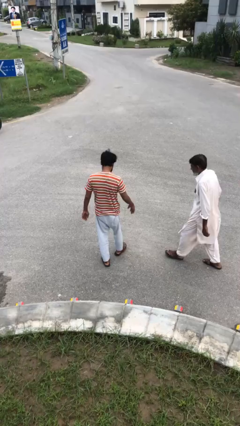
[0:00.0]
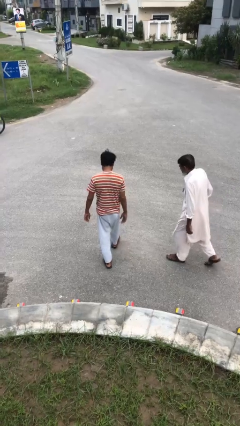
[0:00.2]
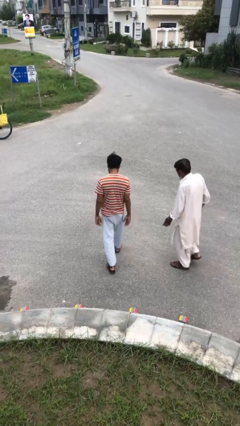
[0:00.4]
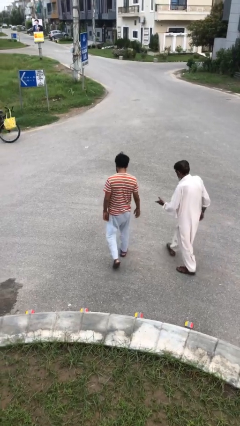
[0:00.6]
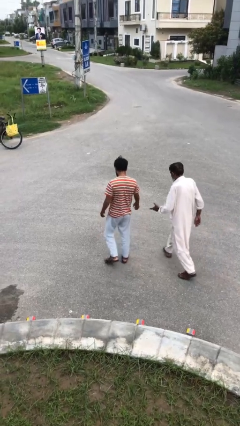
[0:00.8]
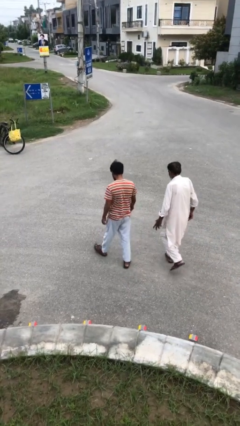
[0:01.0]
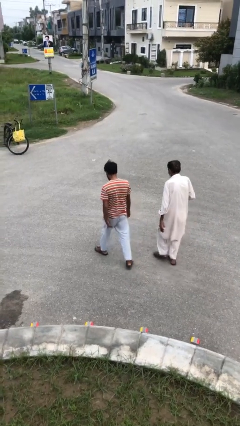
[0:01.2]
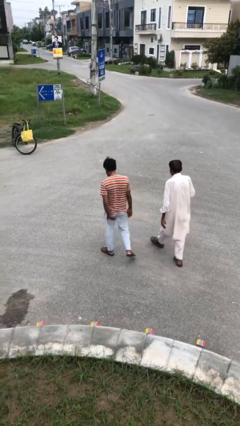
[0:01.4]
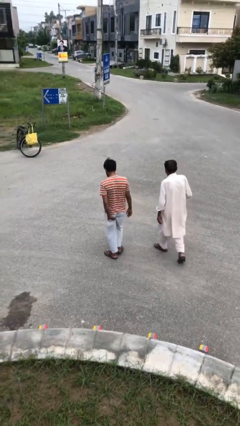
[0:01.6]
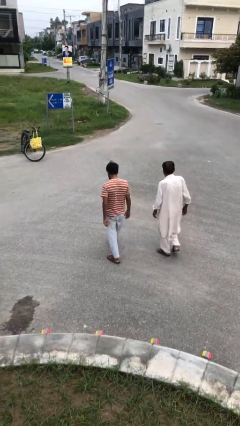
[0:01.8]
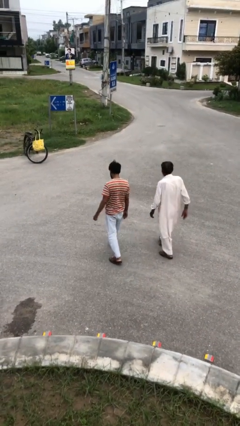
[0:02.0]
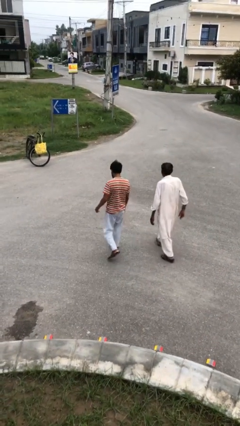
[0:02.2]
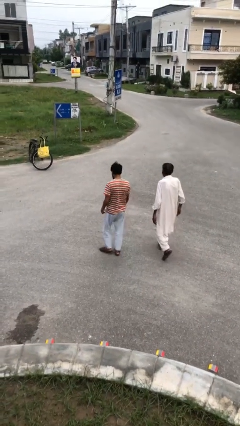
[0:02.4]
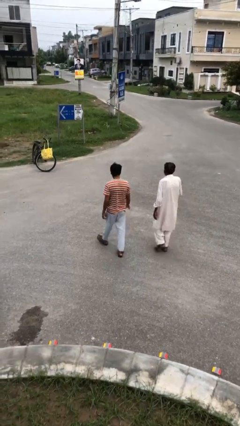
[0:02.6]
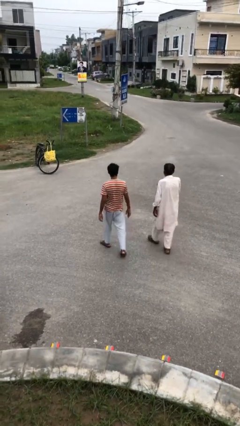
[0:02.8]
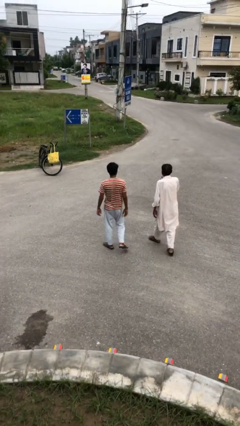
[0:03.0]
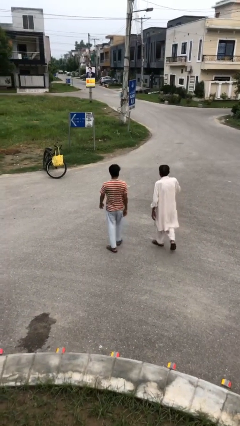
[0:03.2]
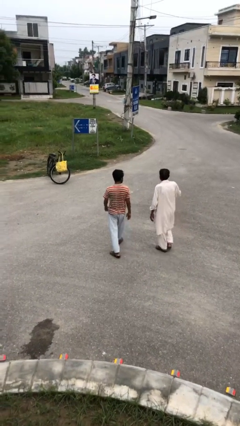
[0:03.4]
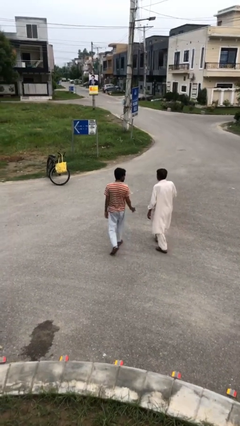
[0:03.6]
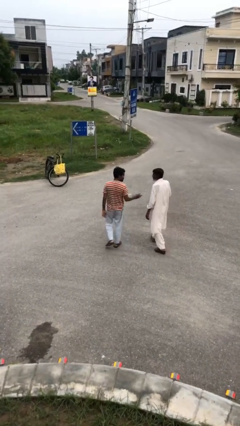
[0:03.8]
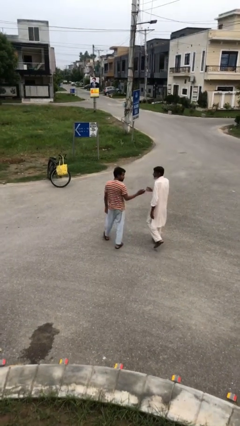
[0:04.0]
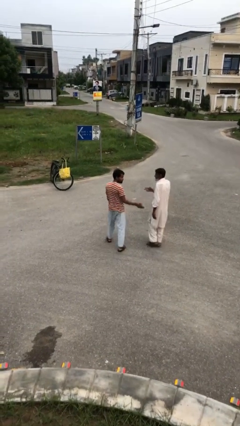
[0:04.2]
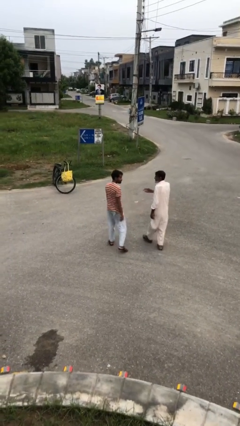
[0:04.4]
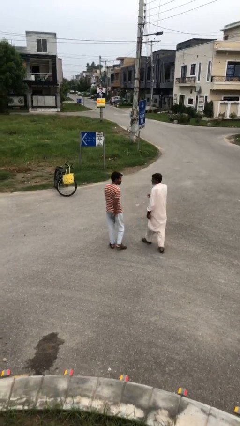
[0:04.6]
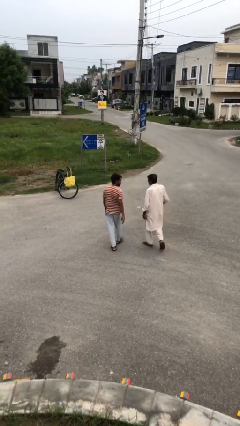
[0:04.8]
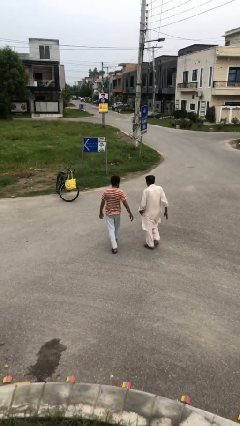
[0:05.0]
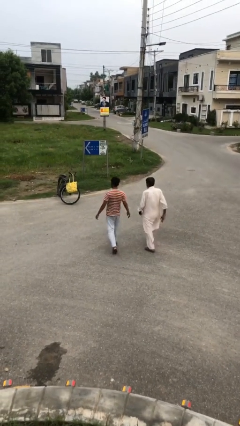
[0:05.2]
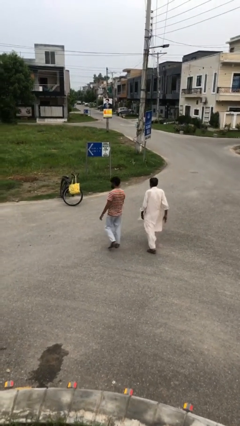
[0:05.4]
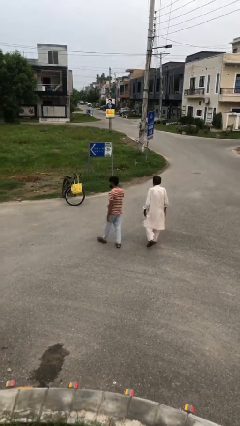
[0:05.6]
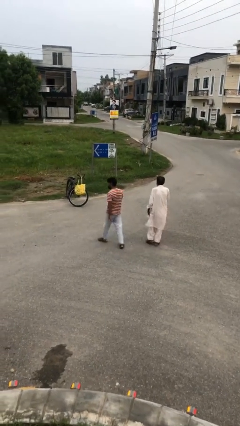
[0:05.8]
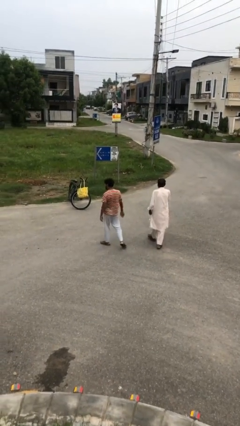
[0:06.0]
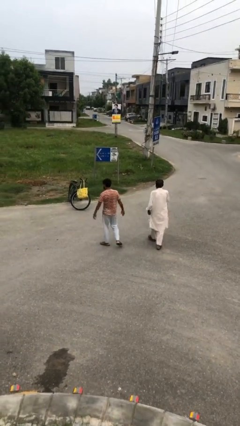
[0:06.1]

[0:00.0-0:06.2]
person talks to person

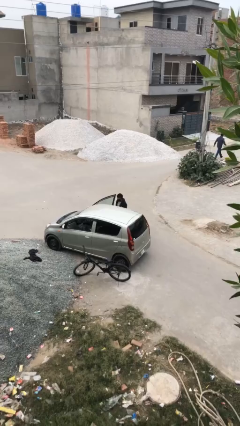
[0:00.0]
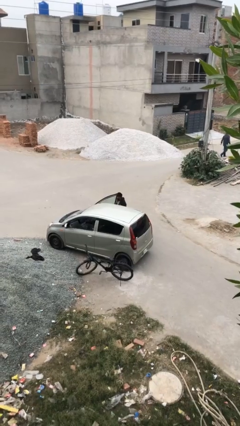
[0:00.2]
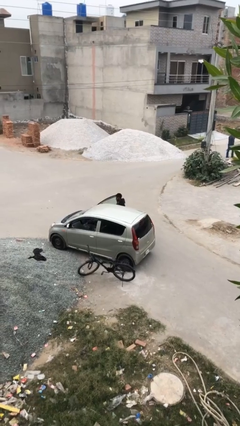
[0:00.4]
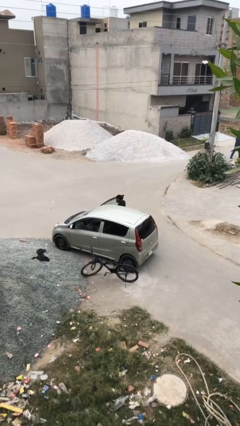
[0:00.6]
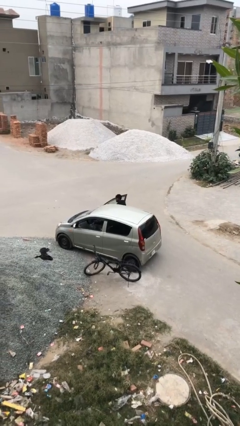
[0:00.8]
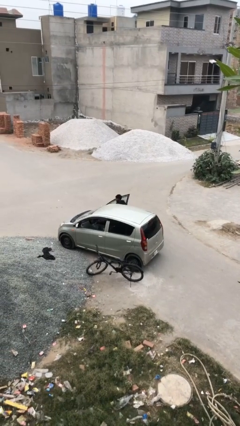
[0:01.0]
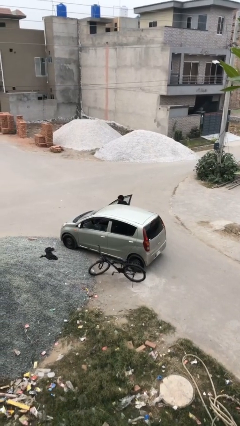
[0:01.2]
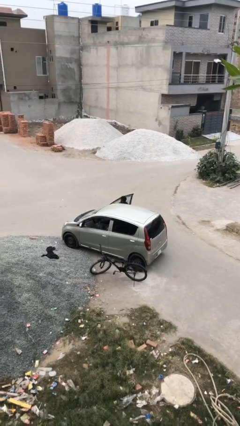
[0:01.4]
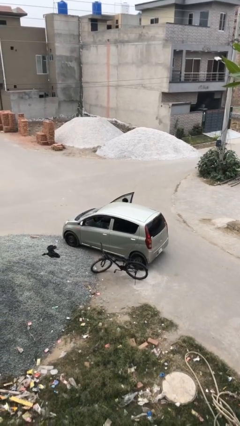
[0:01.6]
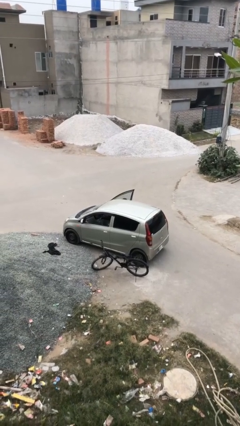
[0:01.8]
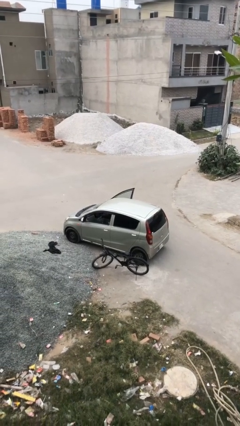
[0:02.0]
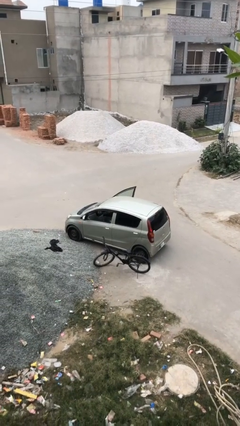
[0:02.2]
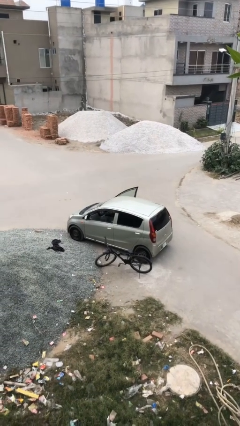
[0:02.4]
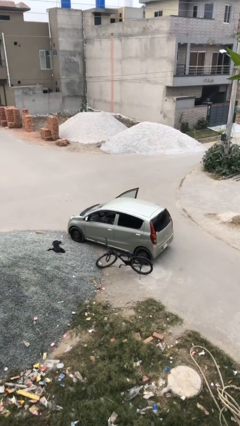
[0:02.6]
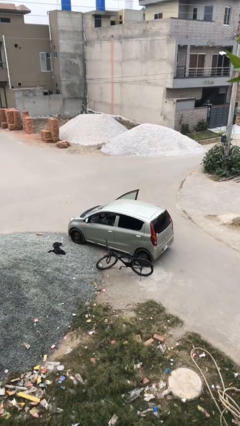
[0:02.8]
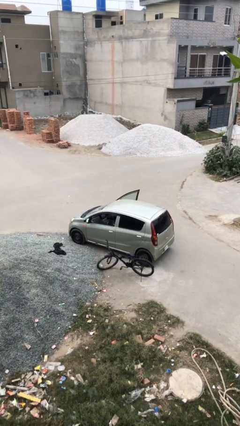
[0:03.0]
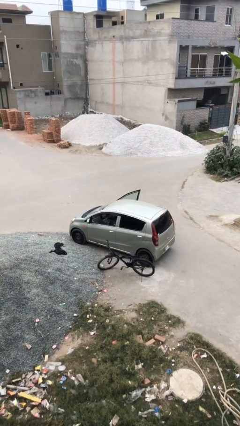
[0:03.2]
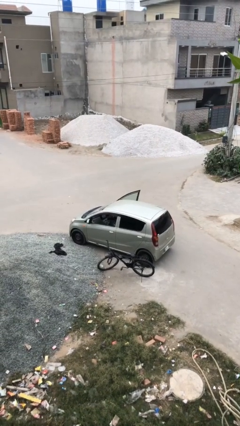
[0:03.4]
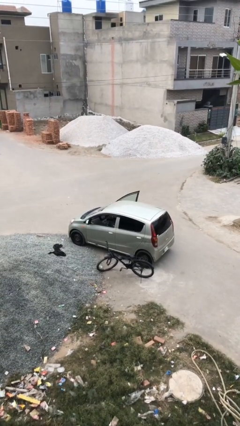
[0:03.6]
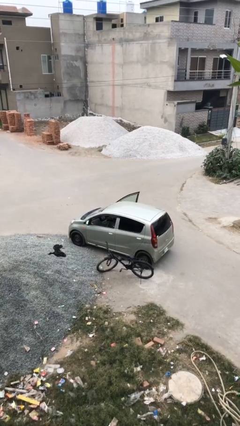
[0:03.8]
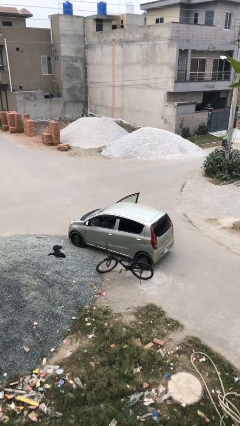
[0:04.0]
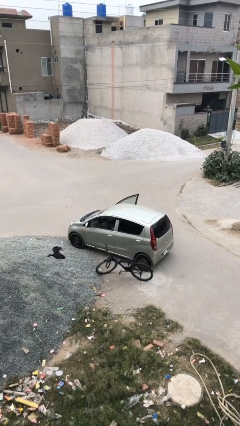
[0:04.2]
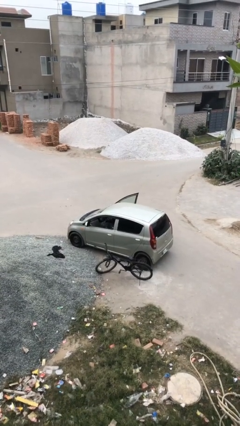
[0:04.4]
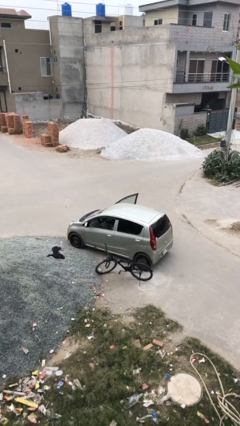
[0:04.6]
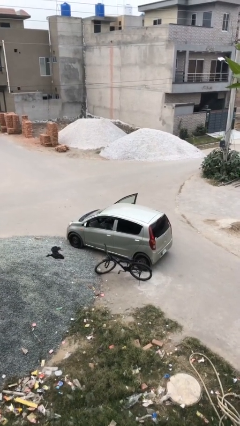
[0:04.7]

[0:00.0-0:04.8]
person enters car

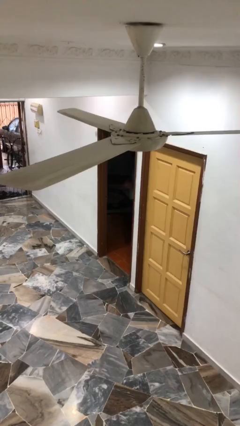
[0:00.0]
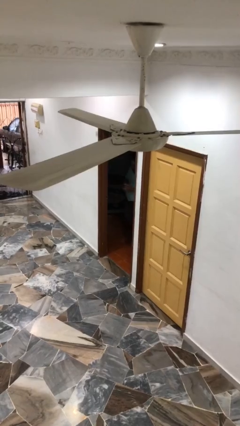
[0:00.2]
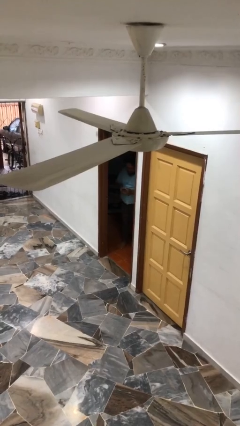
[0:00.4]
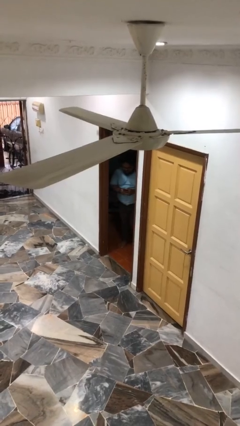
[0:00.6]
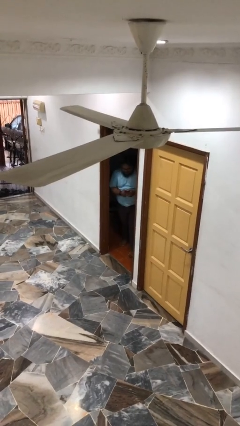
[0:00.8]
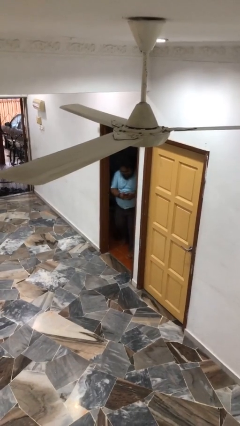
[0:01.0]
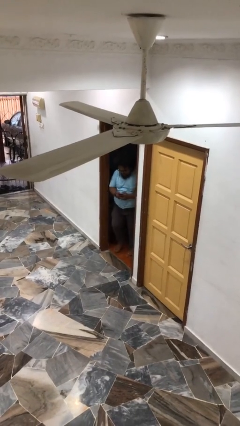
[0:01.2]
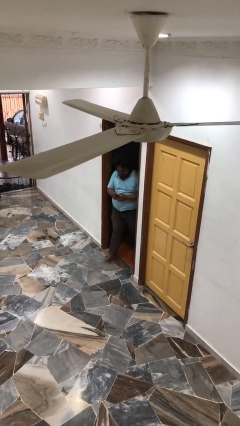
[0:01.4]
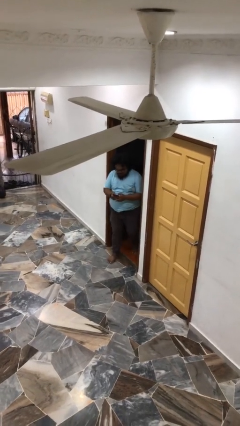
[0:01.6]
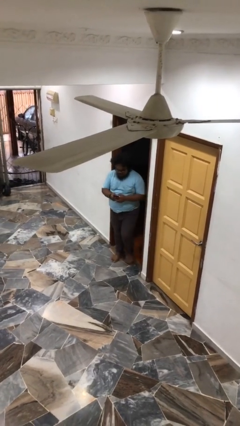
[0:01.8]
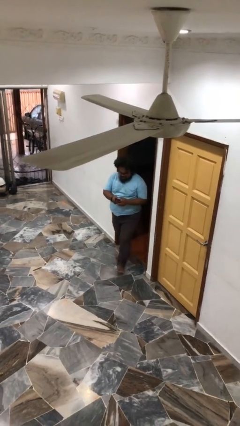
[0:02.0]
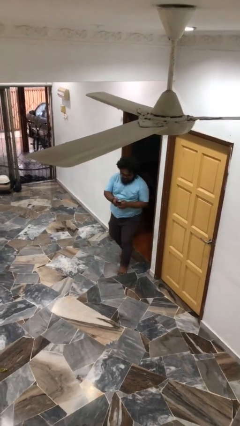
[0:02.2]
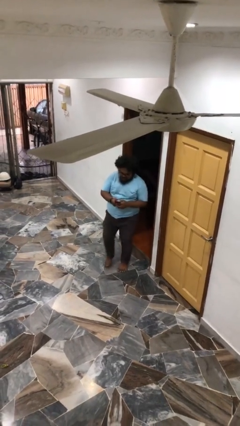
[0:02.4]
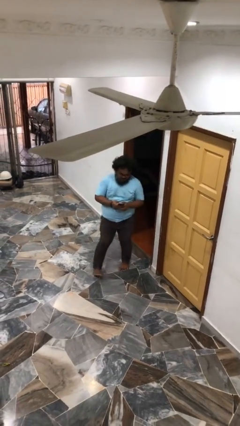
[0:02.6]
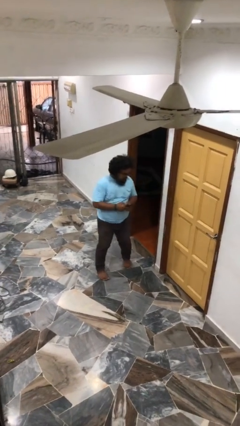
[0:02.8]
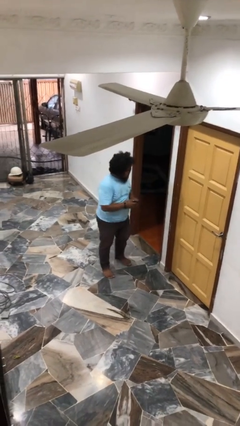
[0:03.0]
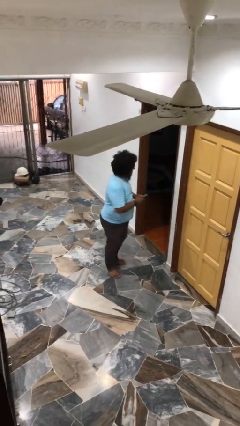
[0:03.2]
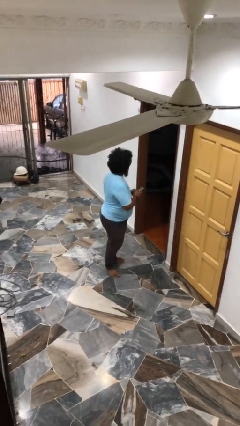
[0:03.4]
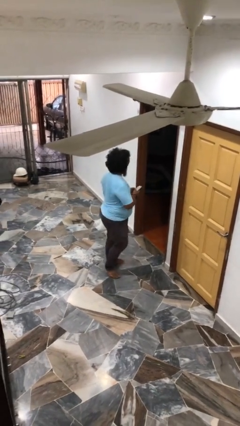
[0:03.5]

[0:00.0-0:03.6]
person enters scene through structure

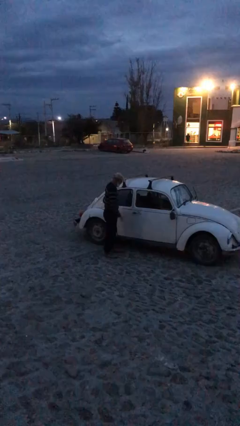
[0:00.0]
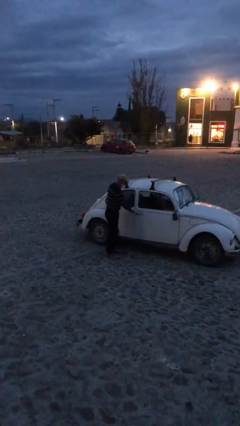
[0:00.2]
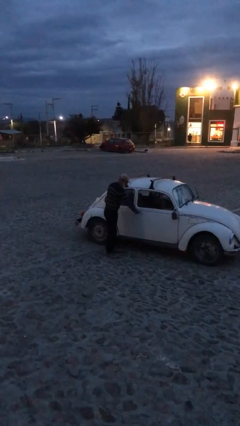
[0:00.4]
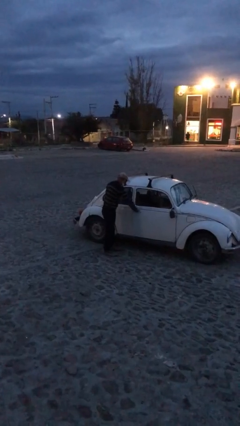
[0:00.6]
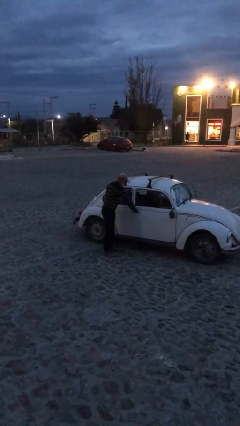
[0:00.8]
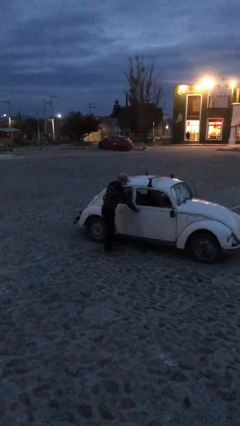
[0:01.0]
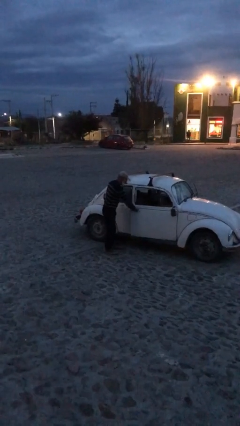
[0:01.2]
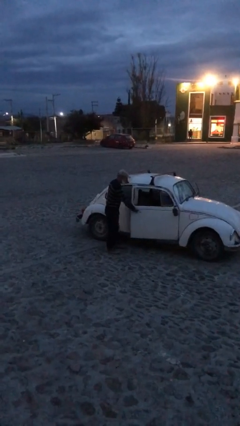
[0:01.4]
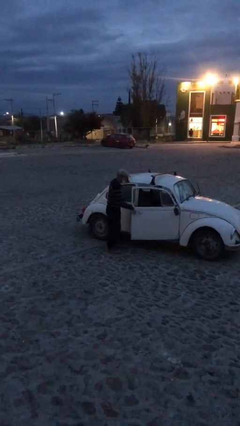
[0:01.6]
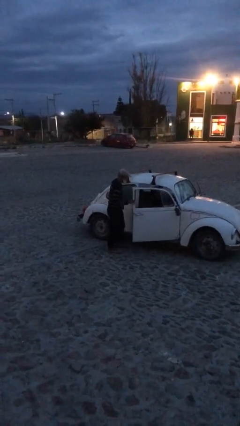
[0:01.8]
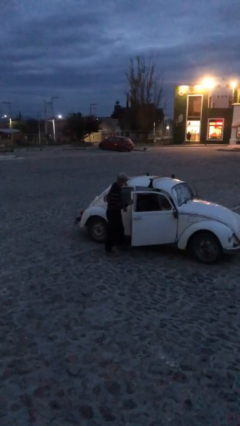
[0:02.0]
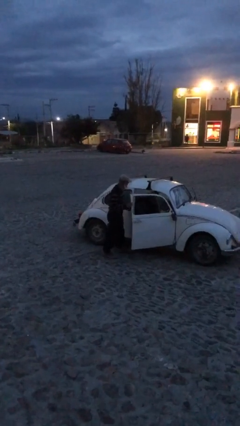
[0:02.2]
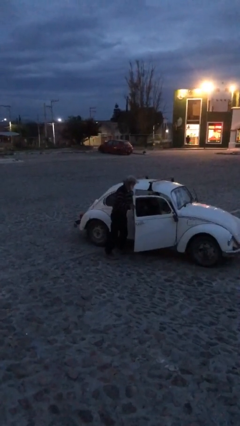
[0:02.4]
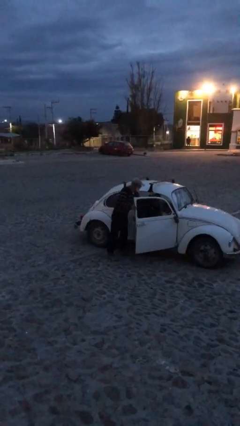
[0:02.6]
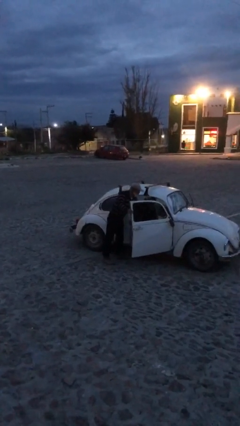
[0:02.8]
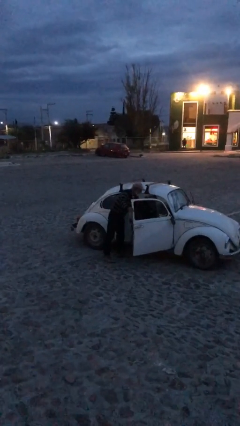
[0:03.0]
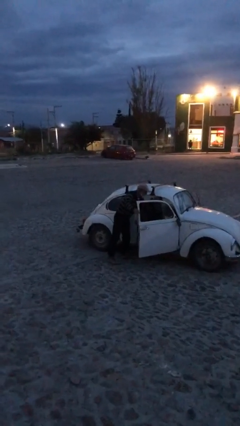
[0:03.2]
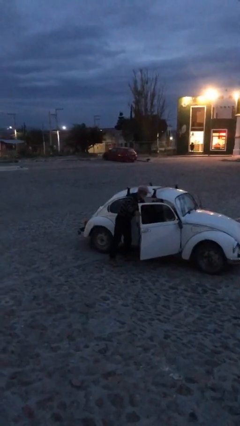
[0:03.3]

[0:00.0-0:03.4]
person opens car door

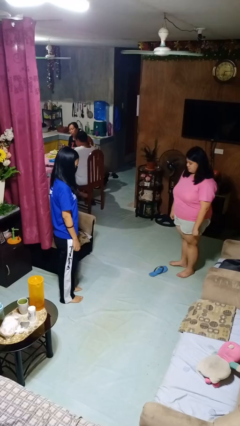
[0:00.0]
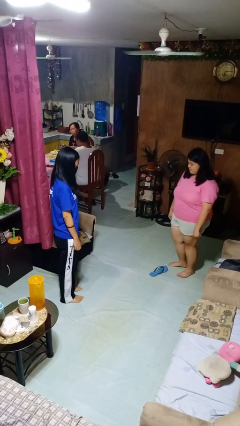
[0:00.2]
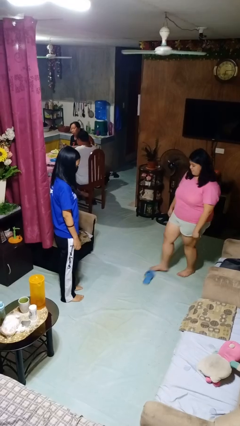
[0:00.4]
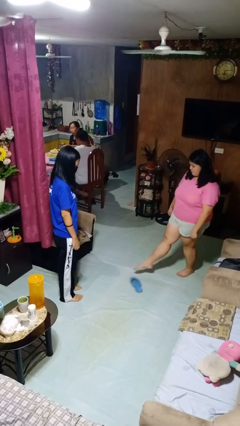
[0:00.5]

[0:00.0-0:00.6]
person kicks object to person
